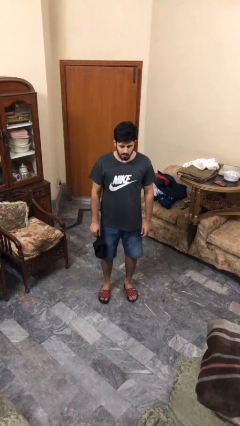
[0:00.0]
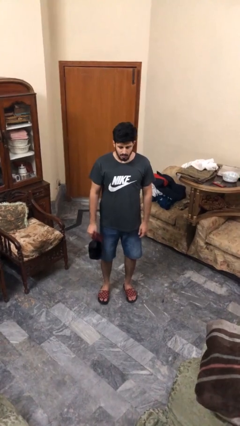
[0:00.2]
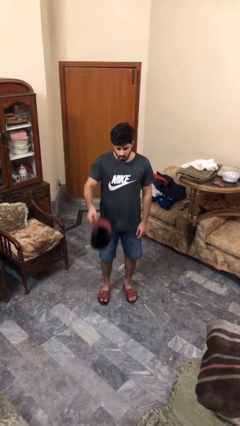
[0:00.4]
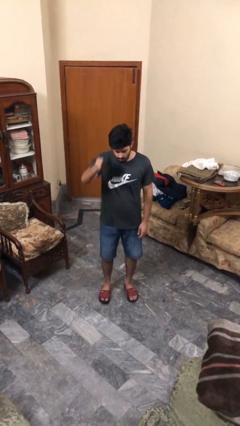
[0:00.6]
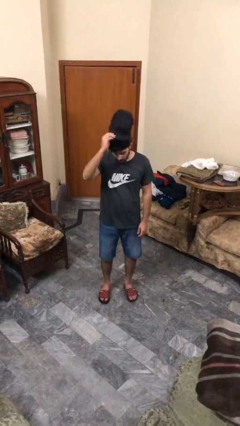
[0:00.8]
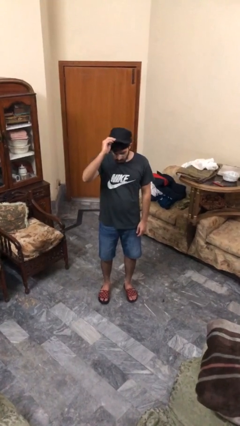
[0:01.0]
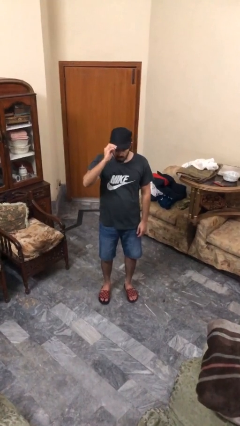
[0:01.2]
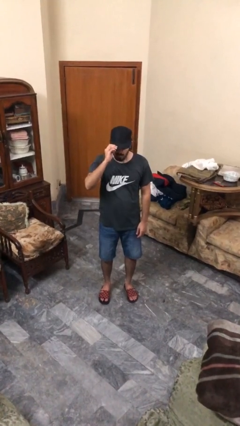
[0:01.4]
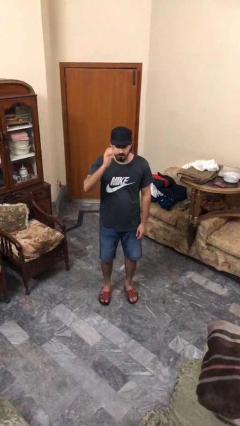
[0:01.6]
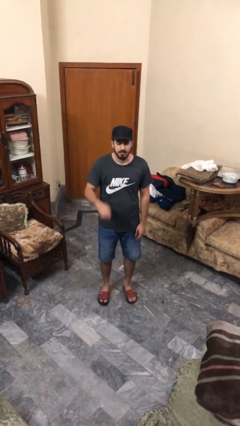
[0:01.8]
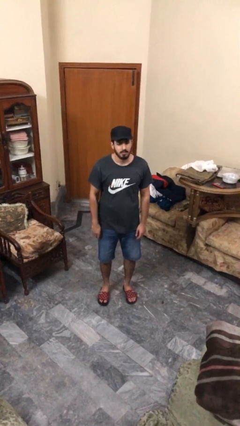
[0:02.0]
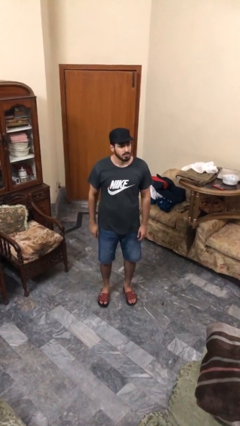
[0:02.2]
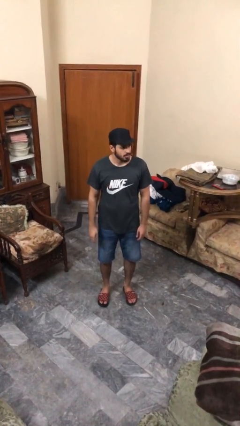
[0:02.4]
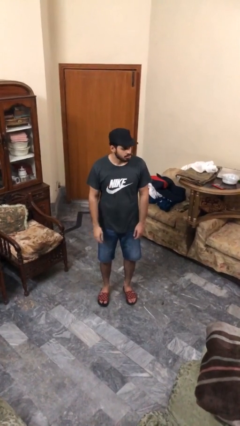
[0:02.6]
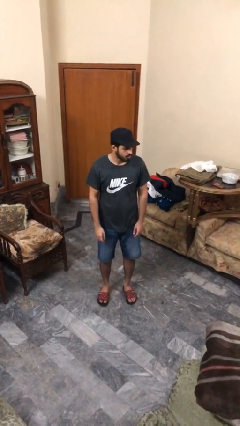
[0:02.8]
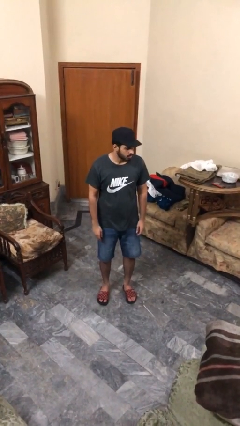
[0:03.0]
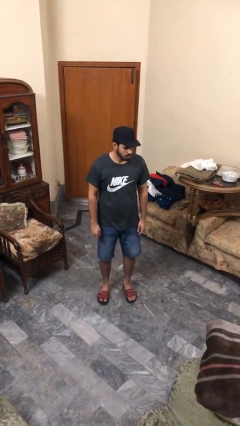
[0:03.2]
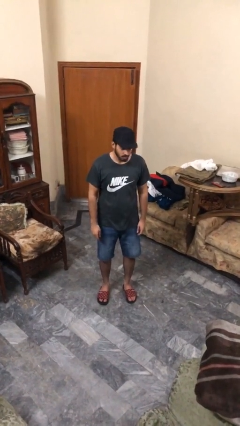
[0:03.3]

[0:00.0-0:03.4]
person puts on hat

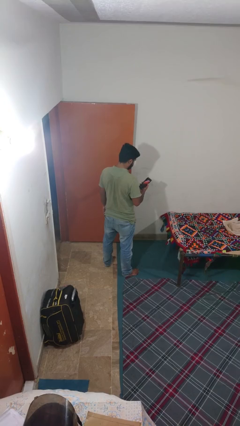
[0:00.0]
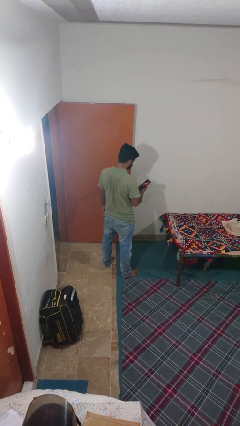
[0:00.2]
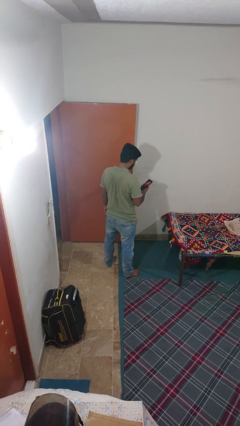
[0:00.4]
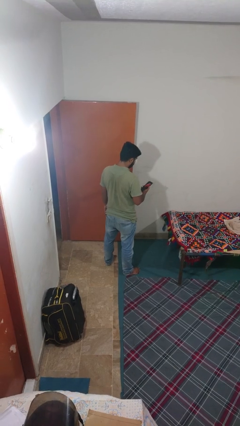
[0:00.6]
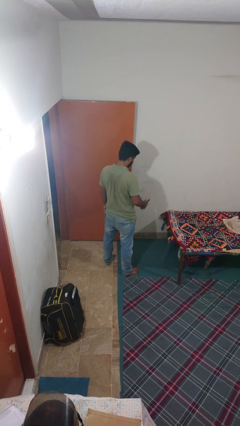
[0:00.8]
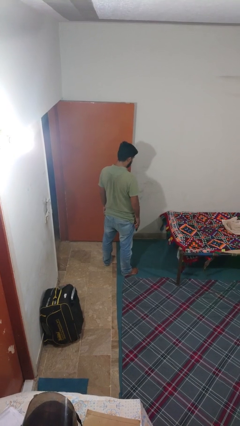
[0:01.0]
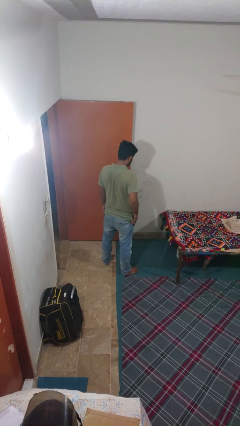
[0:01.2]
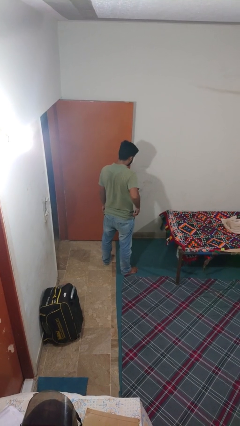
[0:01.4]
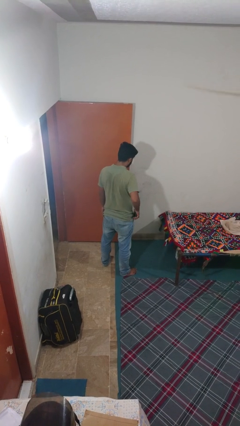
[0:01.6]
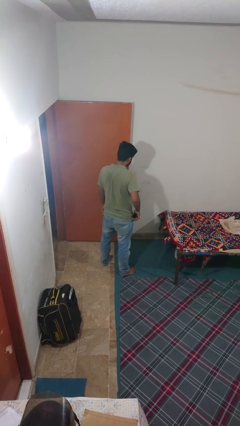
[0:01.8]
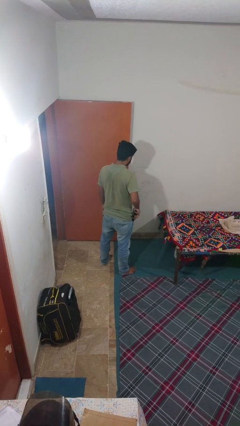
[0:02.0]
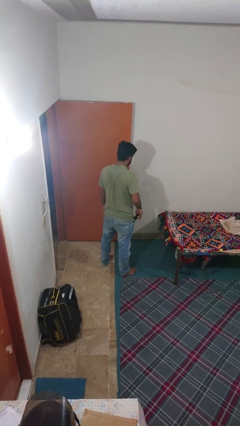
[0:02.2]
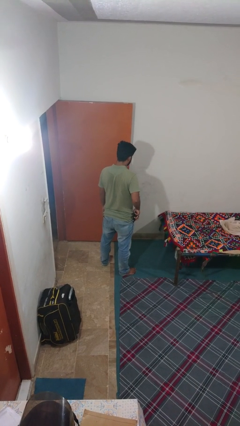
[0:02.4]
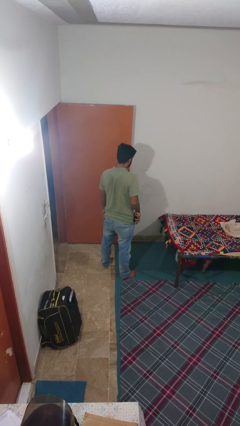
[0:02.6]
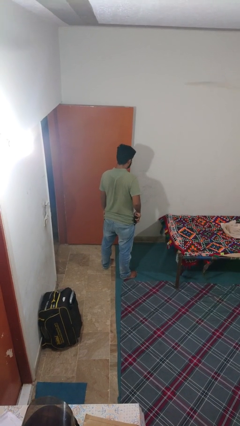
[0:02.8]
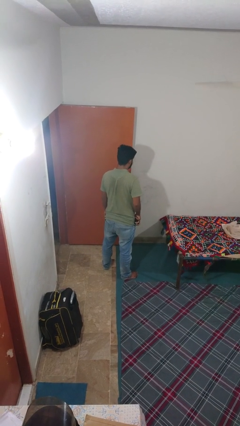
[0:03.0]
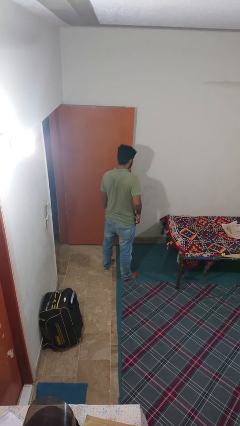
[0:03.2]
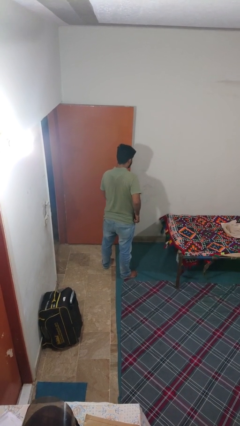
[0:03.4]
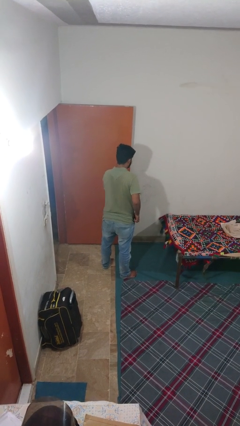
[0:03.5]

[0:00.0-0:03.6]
person puts phone into pocket

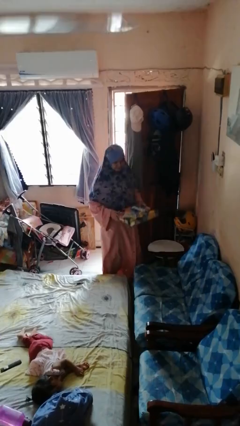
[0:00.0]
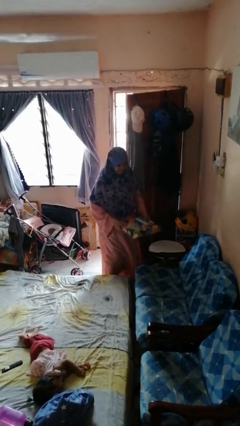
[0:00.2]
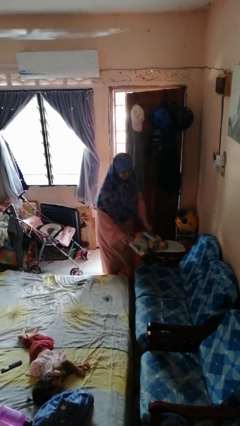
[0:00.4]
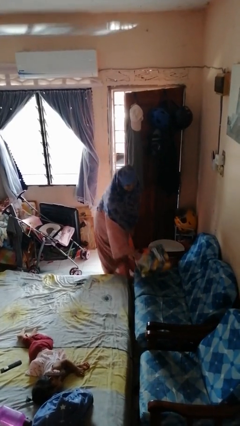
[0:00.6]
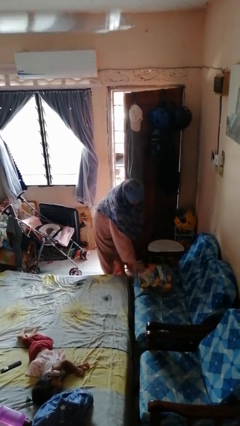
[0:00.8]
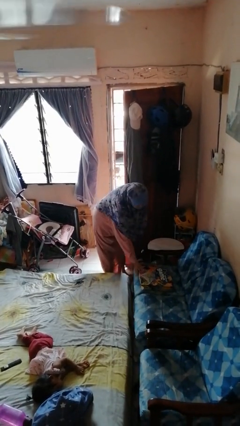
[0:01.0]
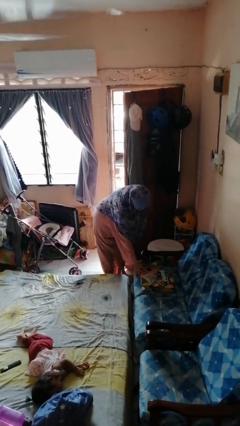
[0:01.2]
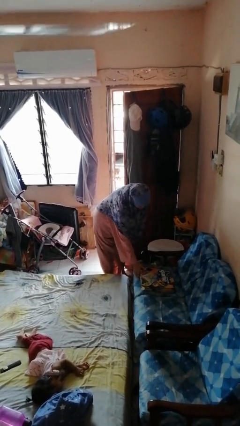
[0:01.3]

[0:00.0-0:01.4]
person puts down object on couch

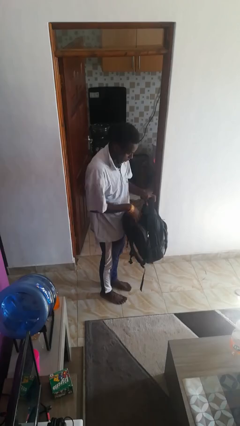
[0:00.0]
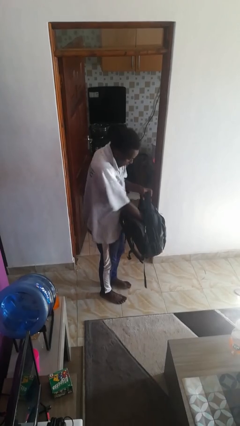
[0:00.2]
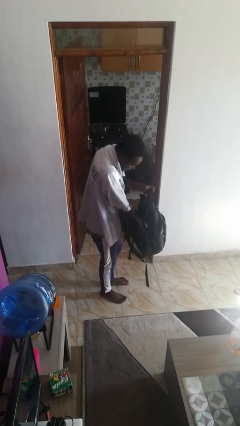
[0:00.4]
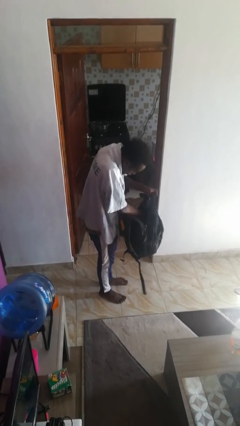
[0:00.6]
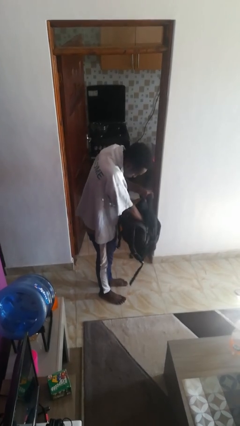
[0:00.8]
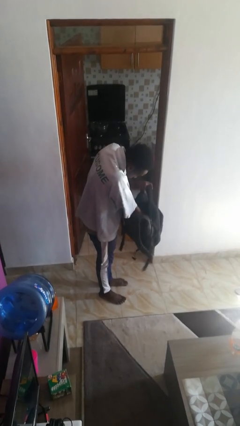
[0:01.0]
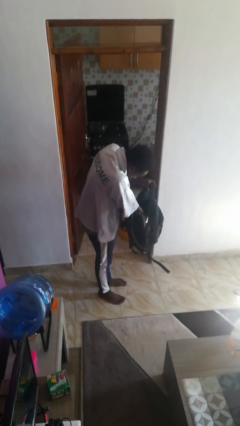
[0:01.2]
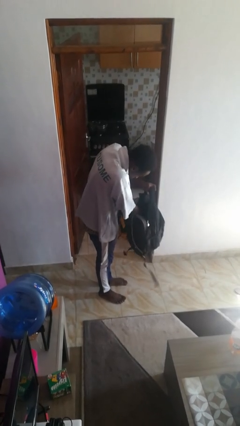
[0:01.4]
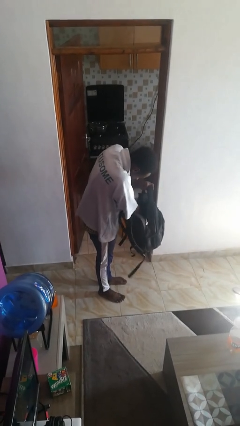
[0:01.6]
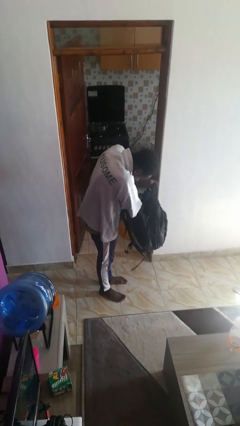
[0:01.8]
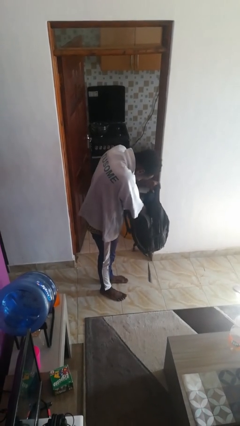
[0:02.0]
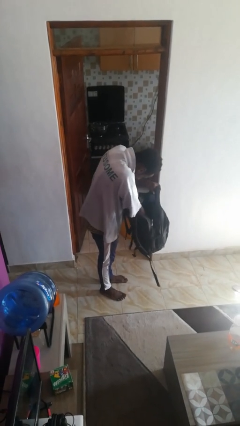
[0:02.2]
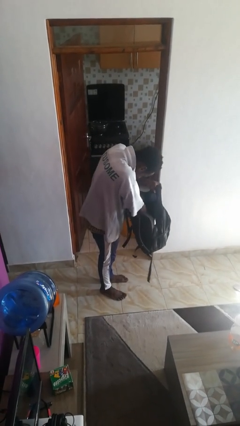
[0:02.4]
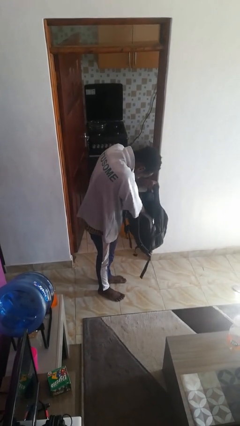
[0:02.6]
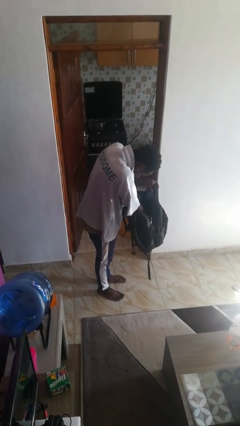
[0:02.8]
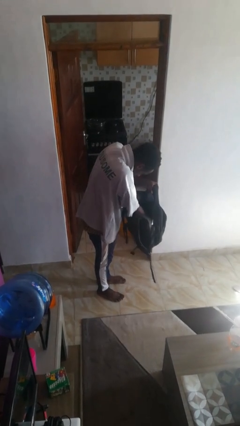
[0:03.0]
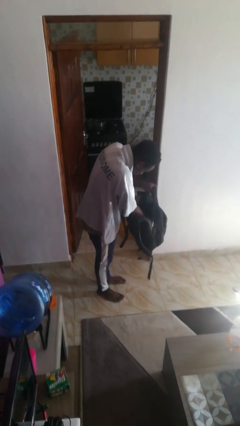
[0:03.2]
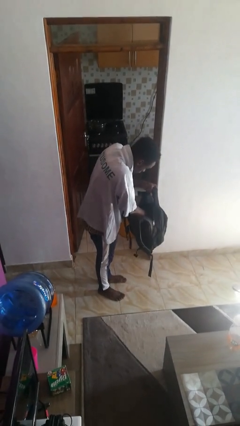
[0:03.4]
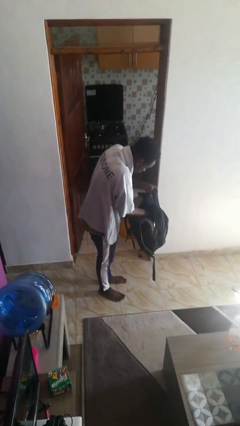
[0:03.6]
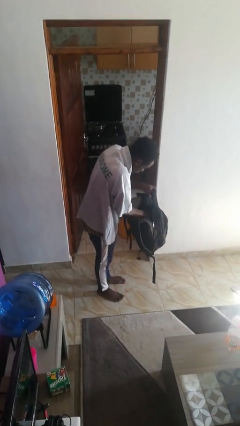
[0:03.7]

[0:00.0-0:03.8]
person searches in backpack

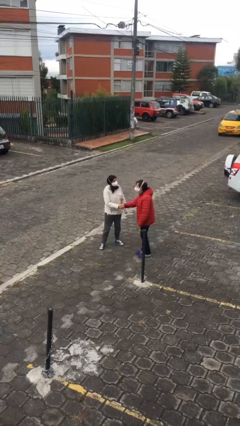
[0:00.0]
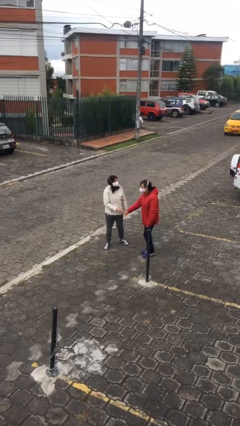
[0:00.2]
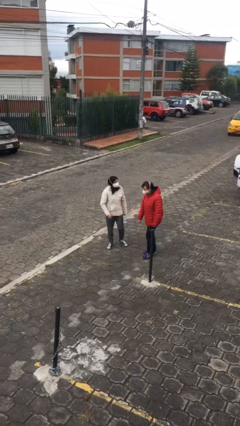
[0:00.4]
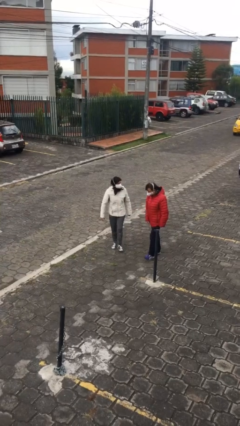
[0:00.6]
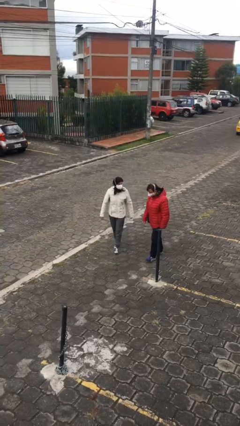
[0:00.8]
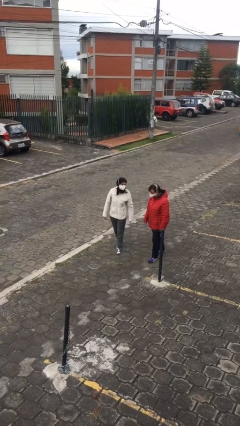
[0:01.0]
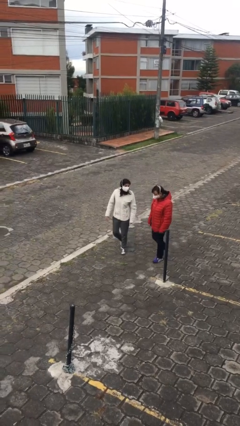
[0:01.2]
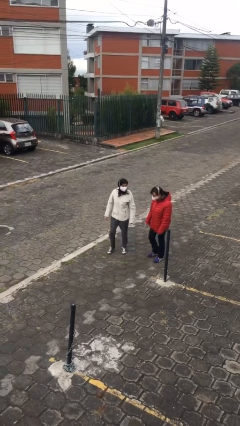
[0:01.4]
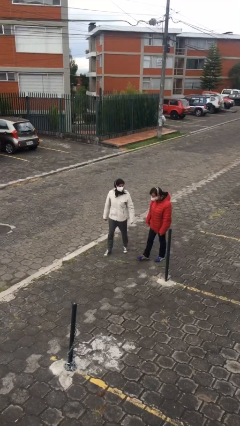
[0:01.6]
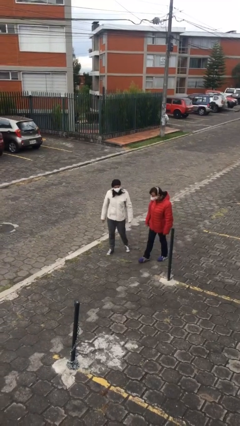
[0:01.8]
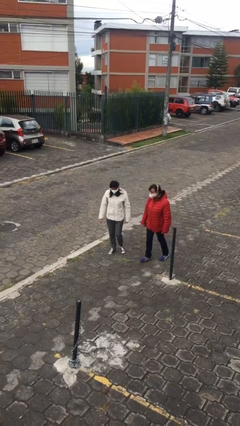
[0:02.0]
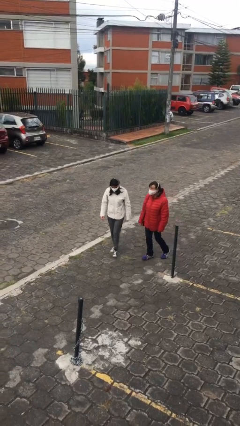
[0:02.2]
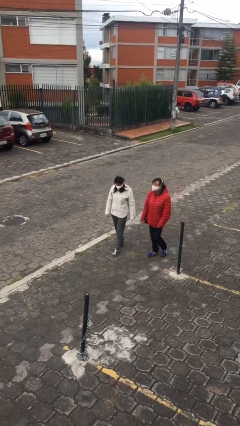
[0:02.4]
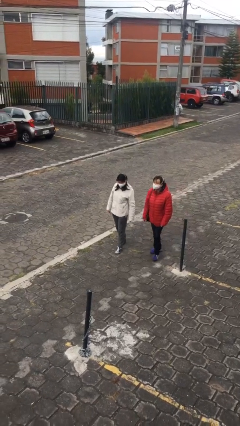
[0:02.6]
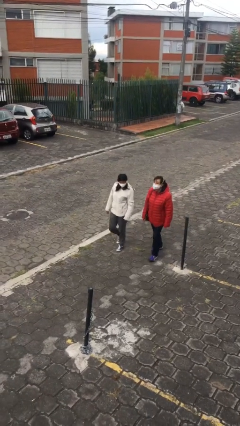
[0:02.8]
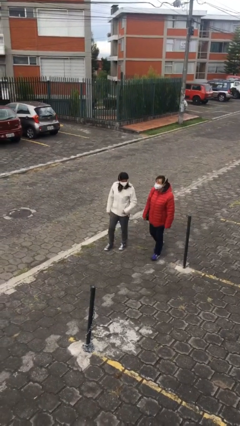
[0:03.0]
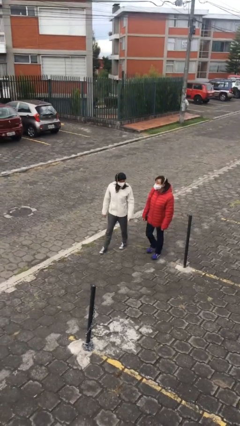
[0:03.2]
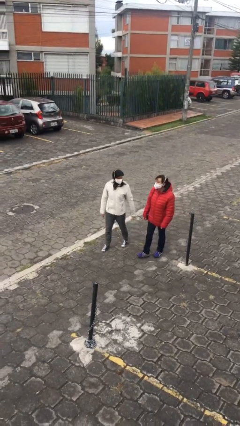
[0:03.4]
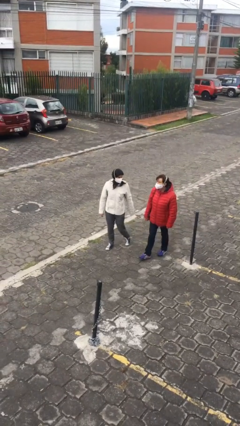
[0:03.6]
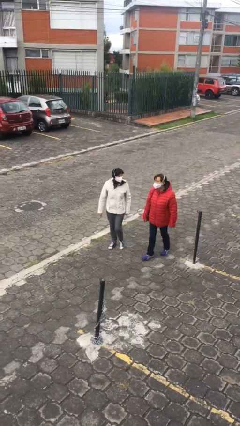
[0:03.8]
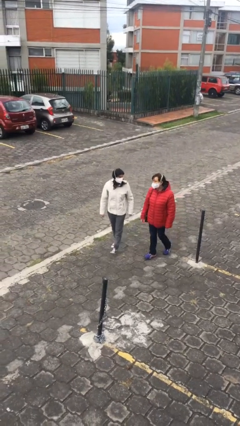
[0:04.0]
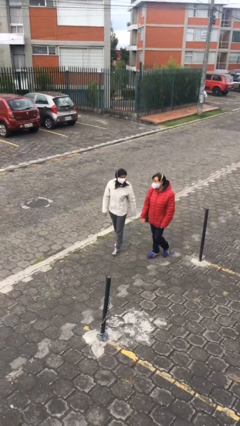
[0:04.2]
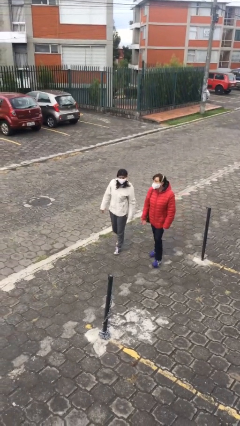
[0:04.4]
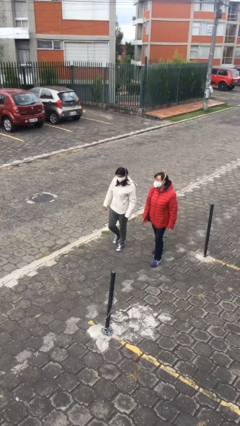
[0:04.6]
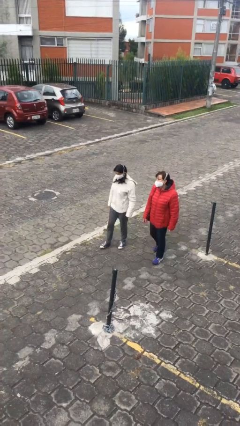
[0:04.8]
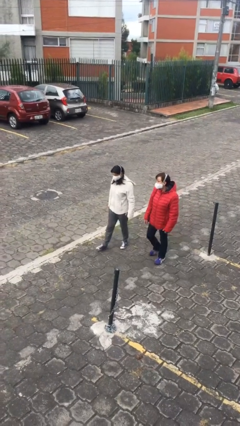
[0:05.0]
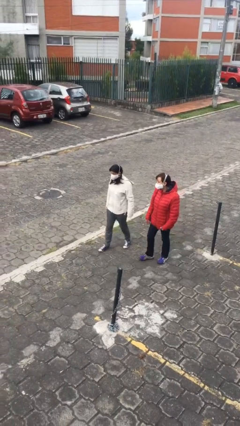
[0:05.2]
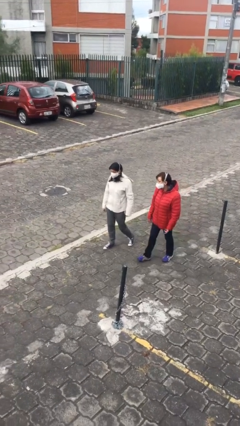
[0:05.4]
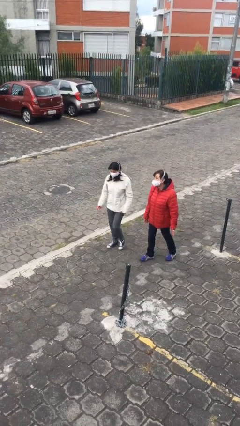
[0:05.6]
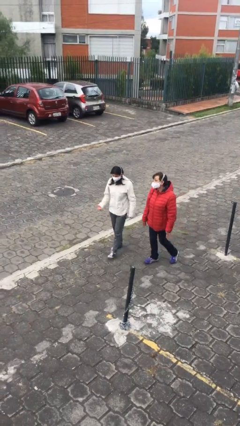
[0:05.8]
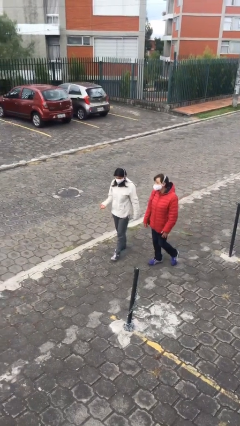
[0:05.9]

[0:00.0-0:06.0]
person talks to person
